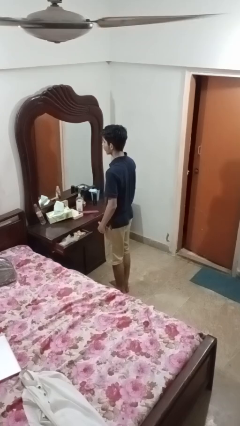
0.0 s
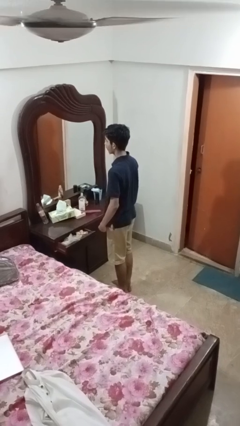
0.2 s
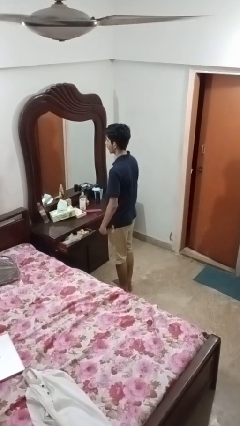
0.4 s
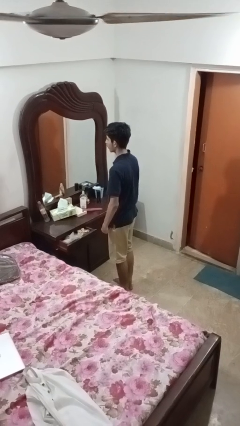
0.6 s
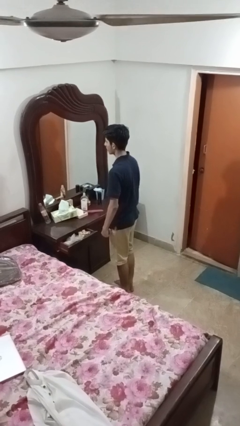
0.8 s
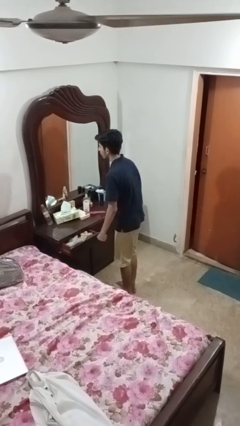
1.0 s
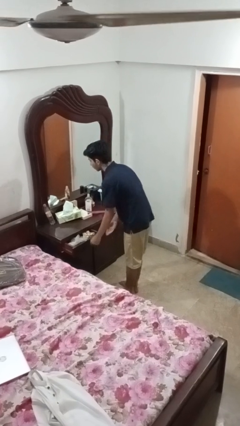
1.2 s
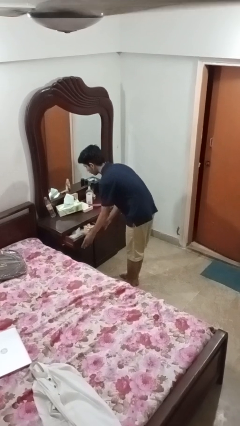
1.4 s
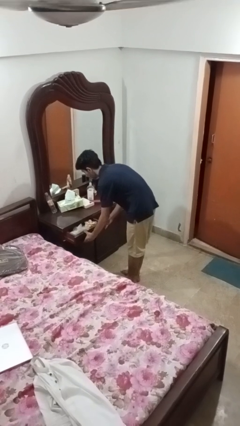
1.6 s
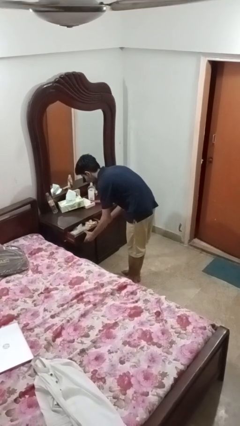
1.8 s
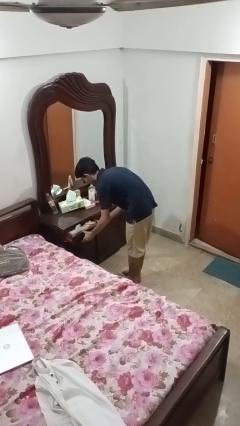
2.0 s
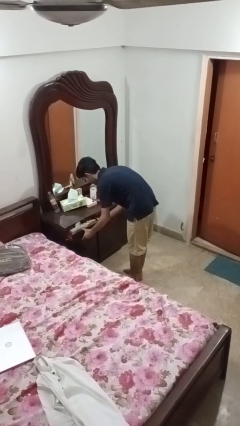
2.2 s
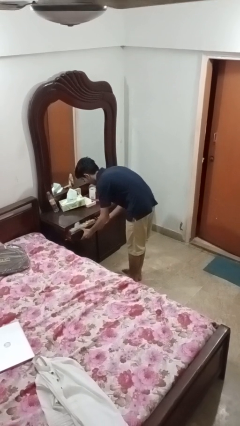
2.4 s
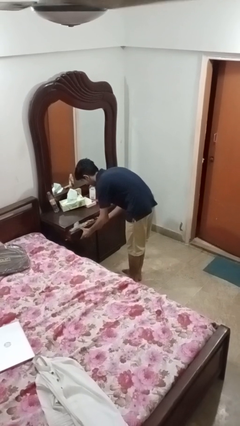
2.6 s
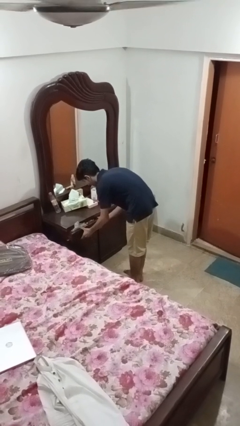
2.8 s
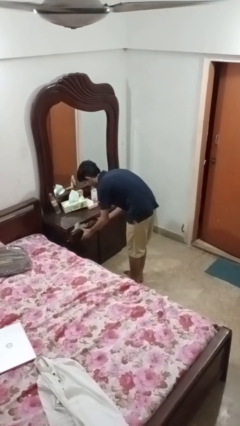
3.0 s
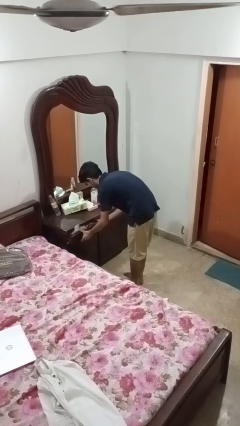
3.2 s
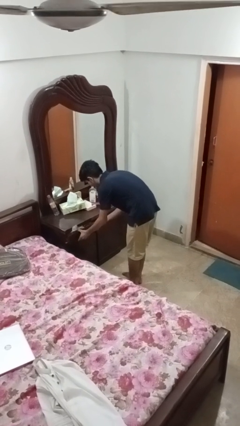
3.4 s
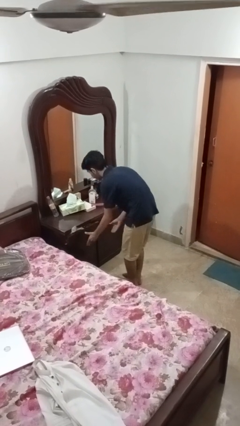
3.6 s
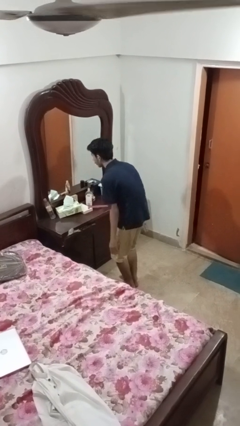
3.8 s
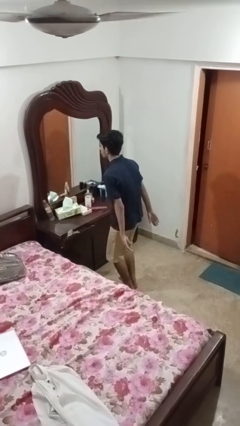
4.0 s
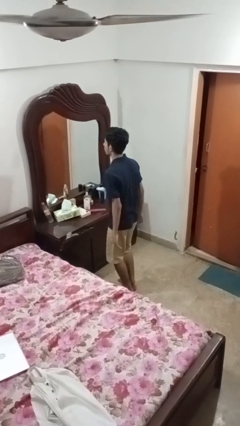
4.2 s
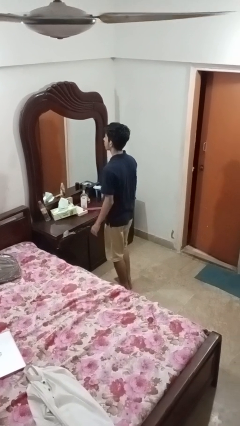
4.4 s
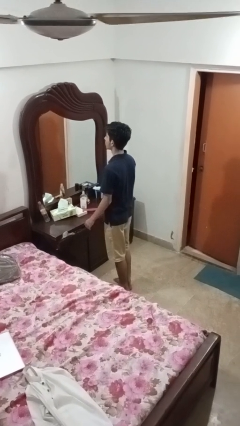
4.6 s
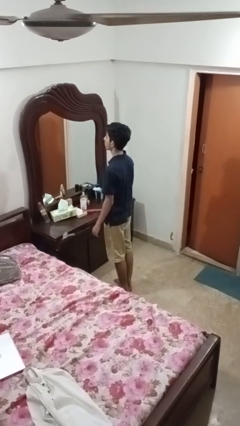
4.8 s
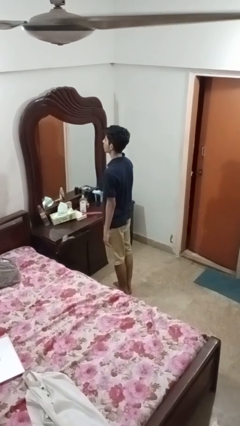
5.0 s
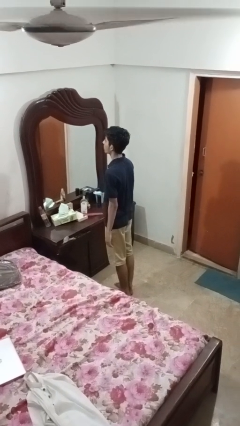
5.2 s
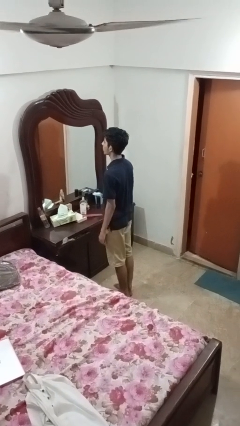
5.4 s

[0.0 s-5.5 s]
person closes dresser drawer

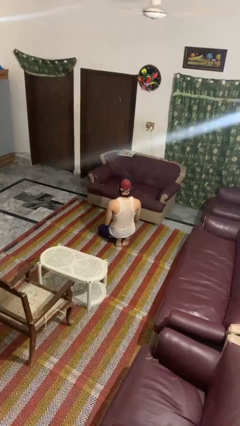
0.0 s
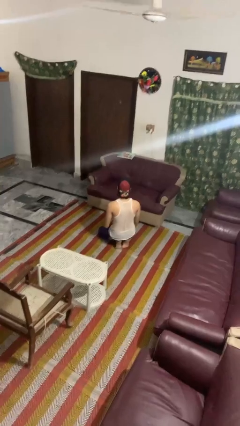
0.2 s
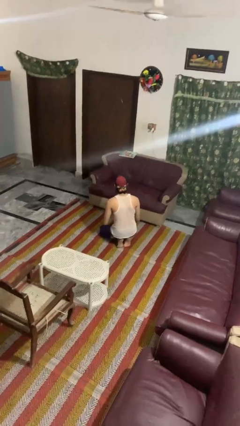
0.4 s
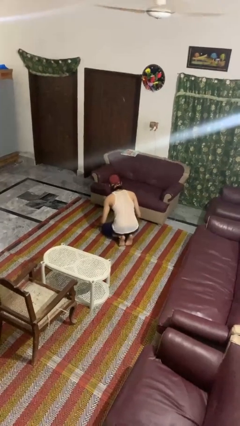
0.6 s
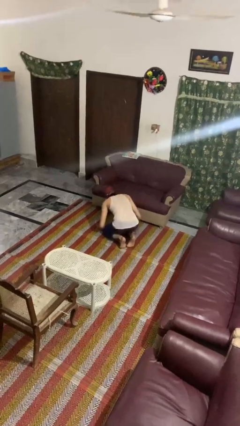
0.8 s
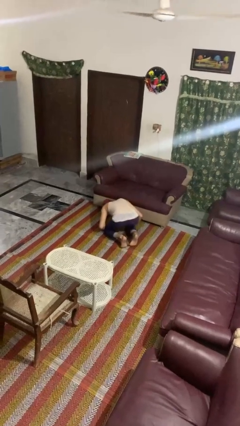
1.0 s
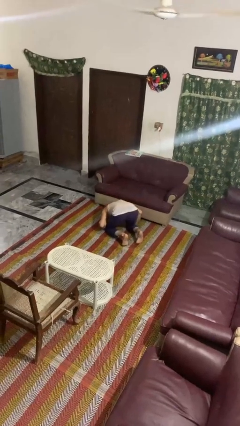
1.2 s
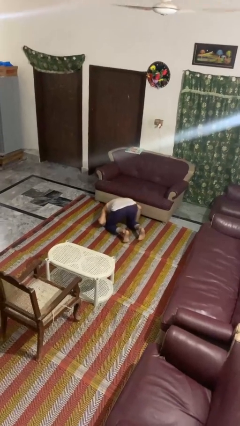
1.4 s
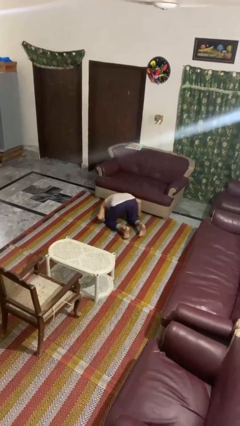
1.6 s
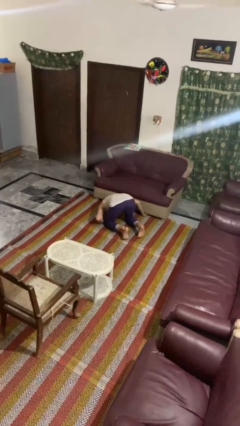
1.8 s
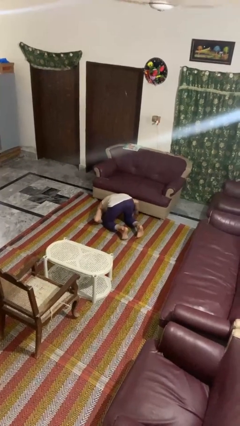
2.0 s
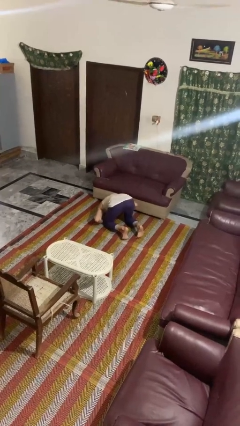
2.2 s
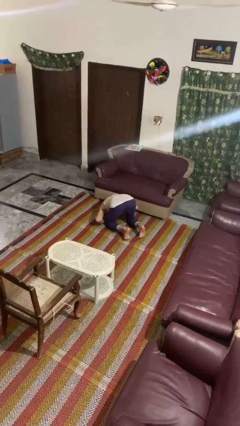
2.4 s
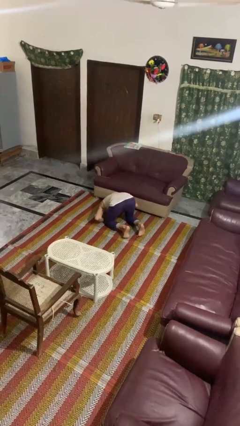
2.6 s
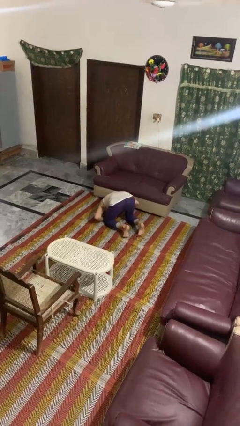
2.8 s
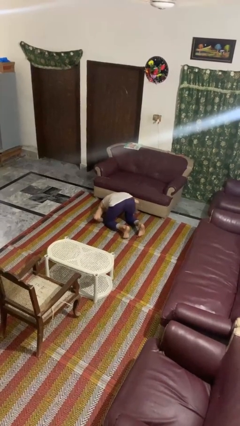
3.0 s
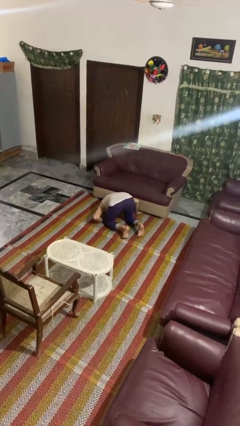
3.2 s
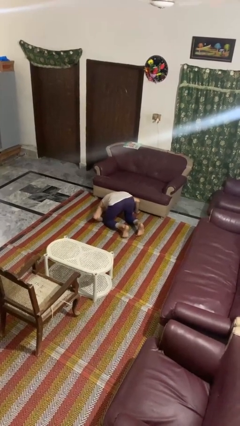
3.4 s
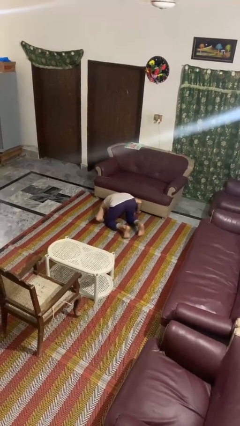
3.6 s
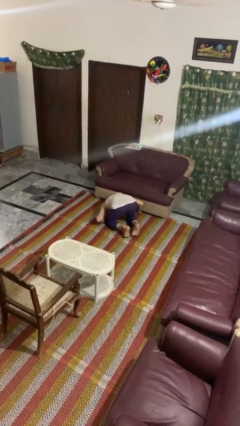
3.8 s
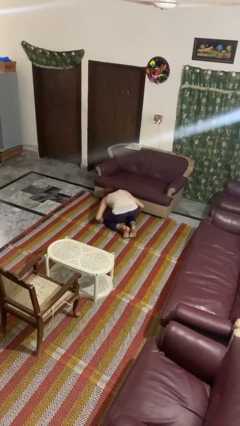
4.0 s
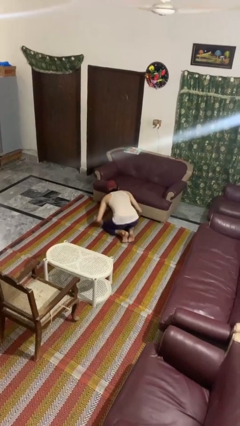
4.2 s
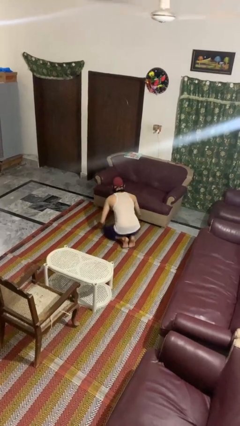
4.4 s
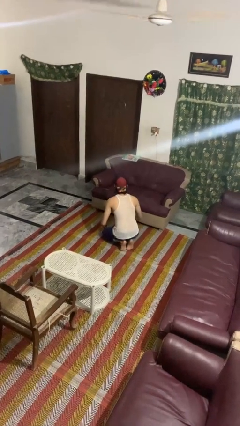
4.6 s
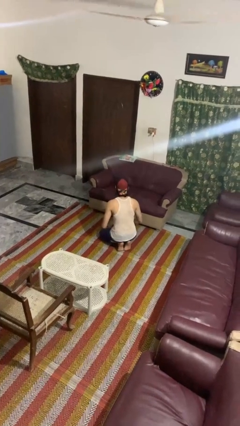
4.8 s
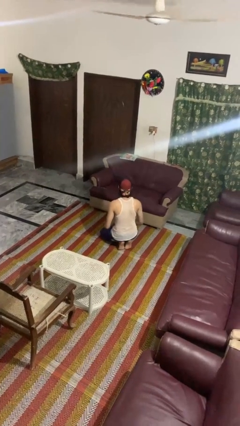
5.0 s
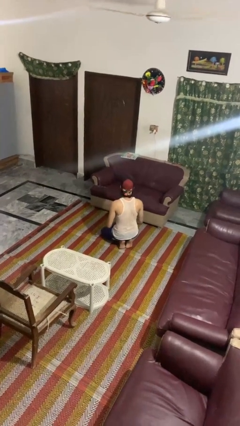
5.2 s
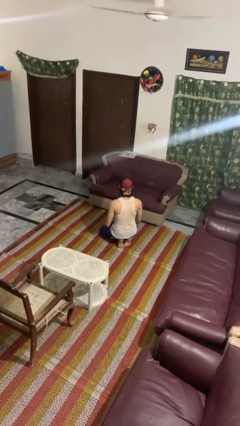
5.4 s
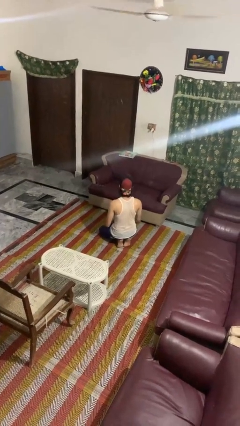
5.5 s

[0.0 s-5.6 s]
person searches under couch

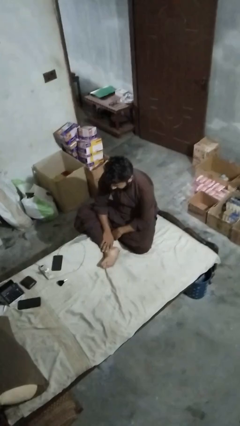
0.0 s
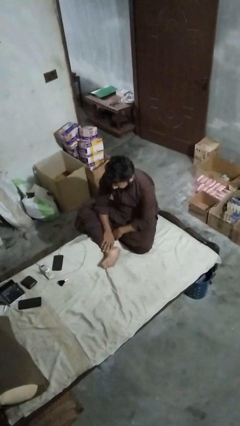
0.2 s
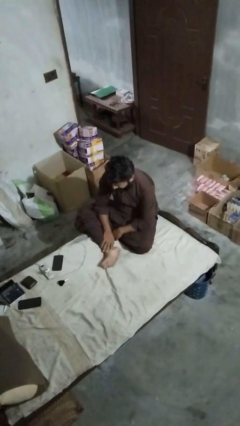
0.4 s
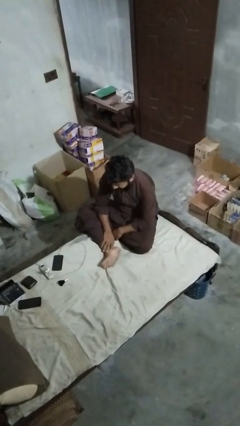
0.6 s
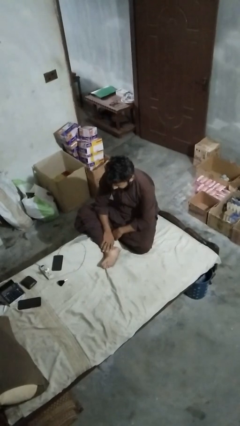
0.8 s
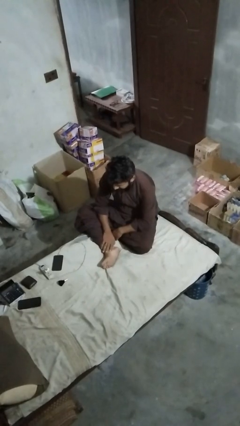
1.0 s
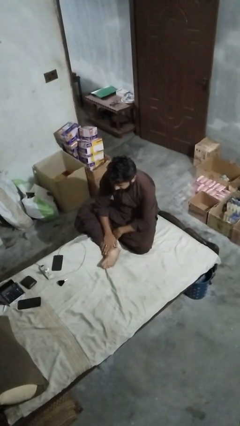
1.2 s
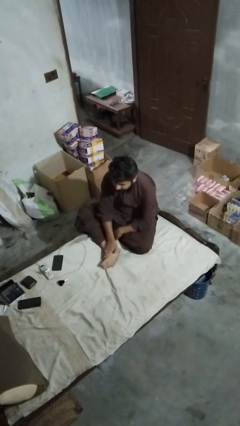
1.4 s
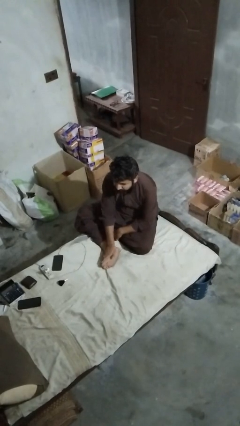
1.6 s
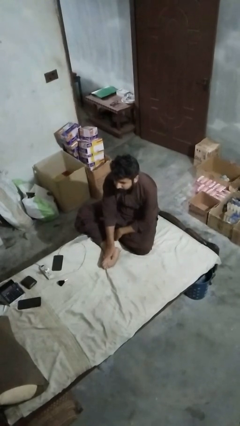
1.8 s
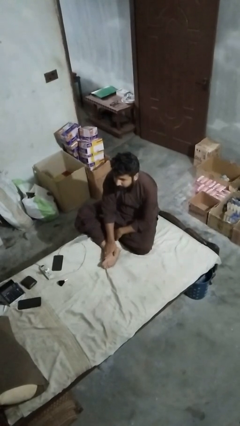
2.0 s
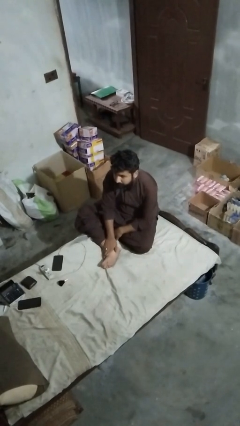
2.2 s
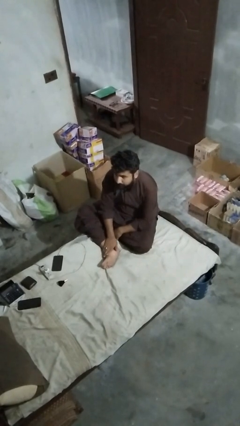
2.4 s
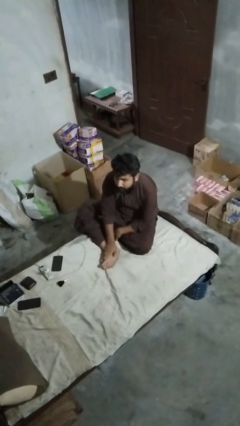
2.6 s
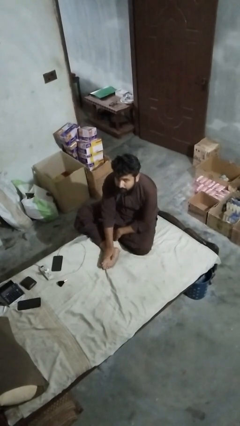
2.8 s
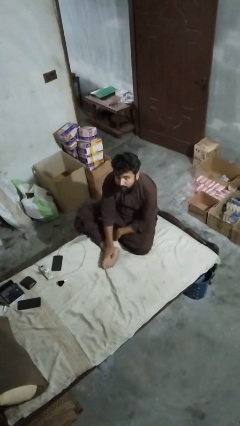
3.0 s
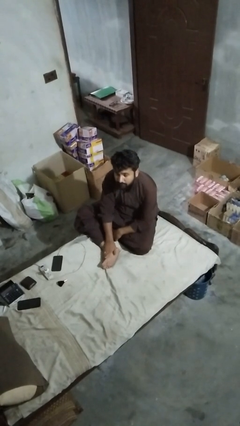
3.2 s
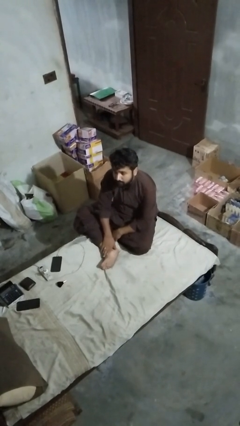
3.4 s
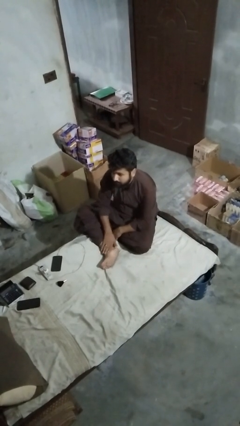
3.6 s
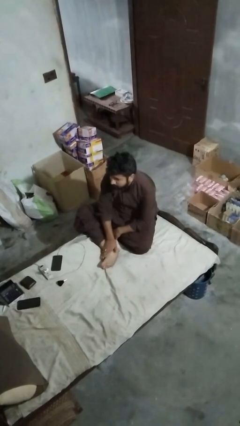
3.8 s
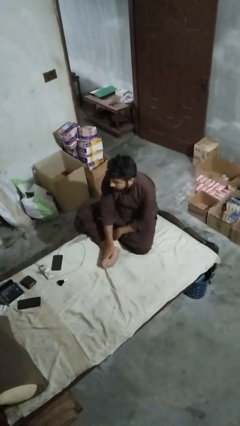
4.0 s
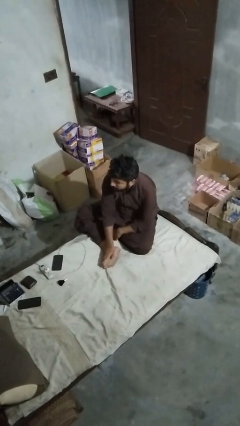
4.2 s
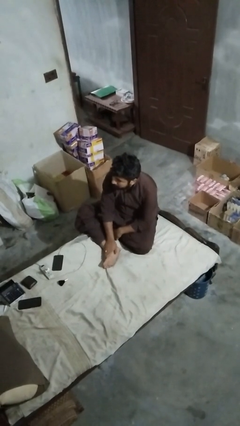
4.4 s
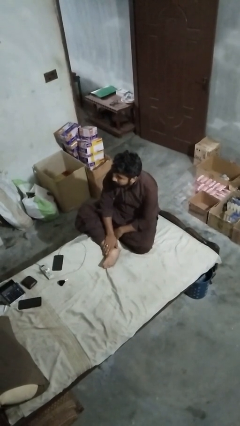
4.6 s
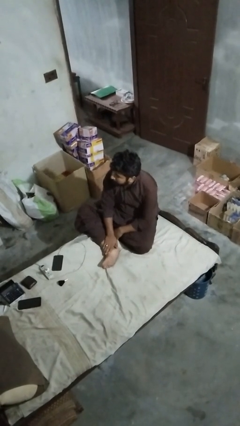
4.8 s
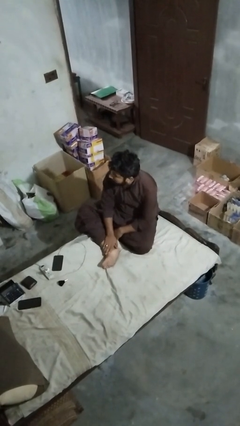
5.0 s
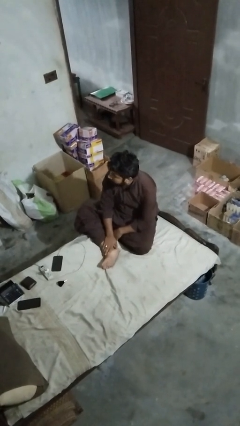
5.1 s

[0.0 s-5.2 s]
person rubs foot

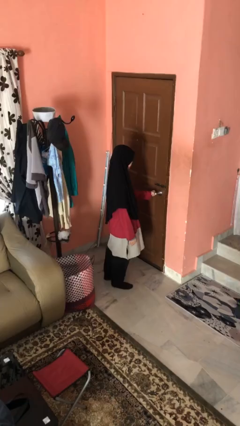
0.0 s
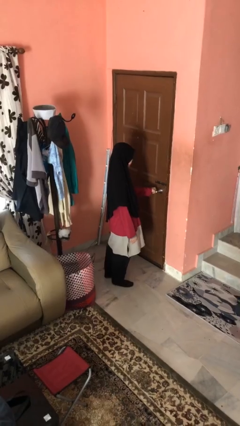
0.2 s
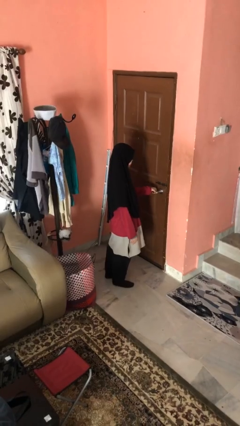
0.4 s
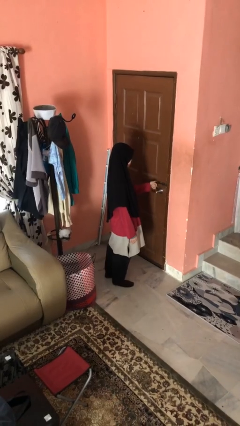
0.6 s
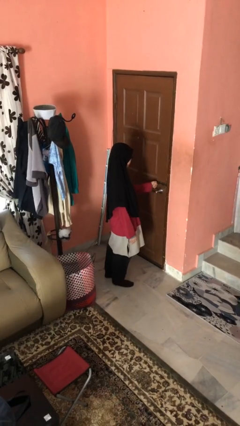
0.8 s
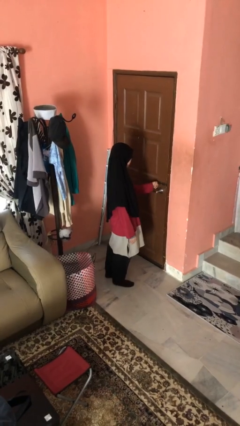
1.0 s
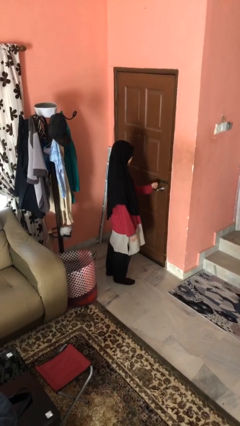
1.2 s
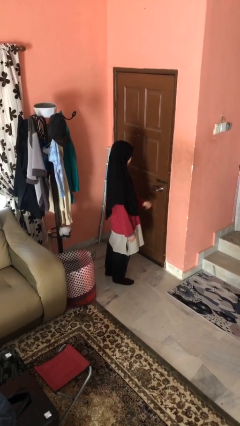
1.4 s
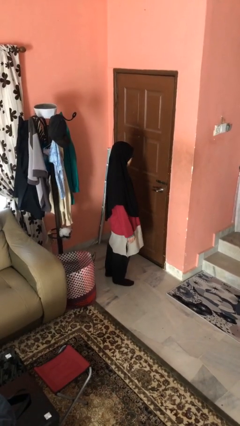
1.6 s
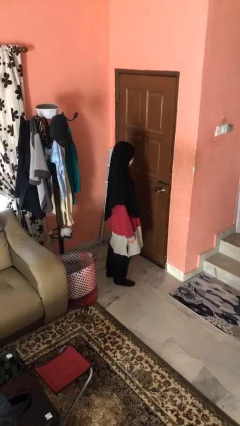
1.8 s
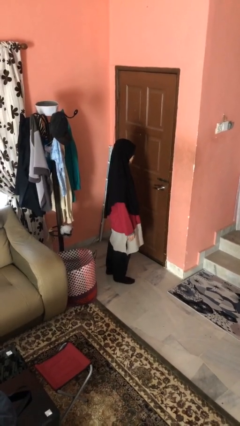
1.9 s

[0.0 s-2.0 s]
person locks door with keys
